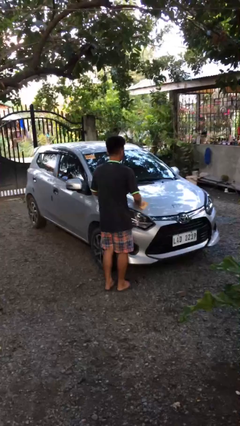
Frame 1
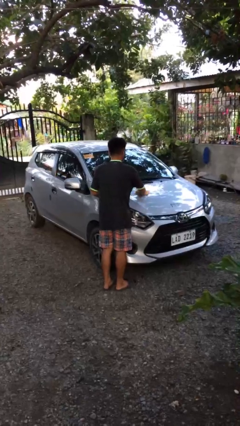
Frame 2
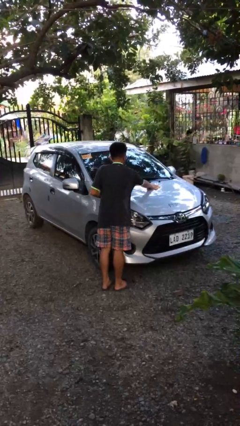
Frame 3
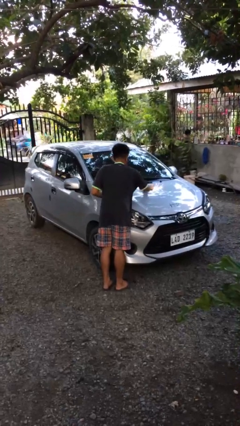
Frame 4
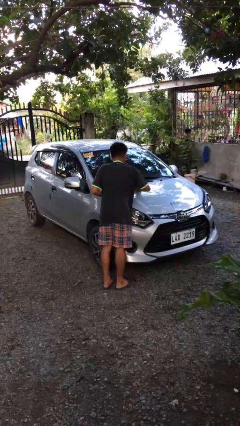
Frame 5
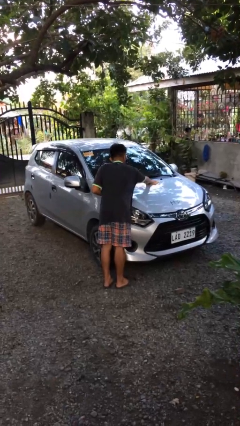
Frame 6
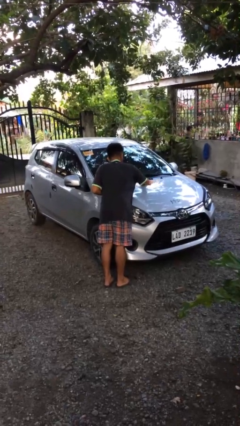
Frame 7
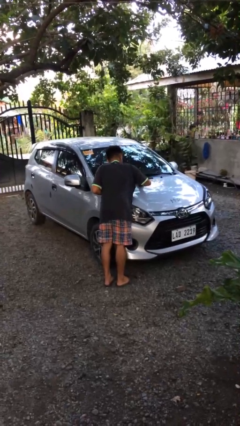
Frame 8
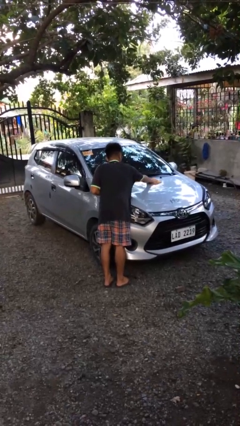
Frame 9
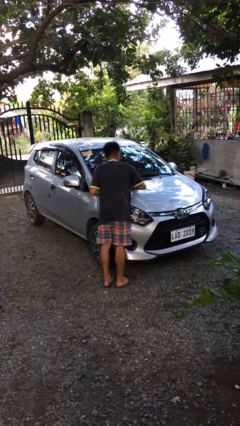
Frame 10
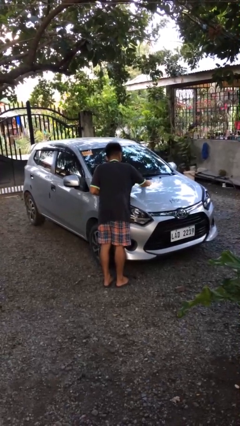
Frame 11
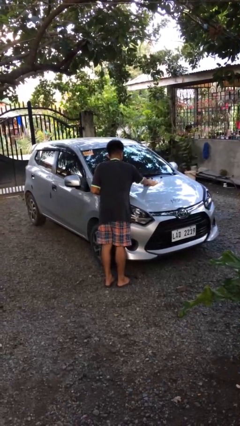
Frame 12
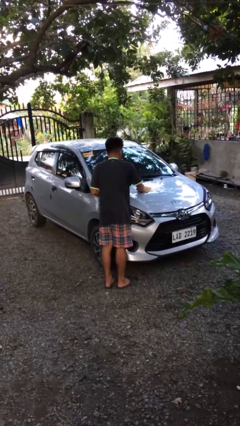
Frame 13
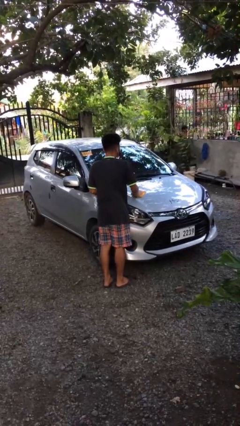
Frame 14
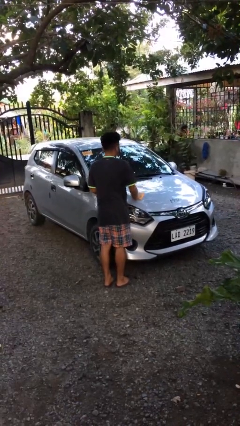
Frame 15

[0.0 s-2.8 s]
person polishes car with rag

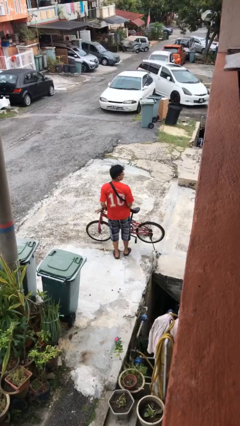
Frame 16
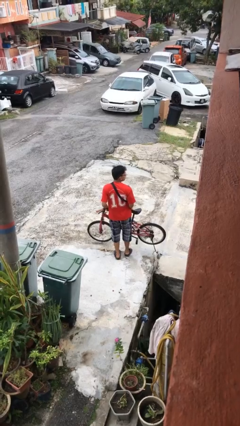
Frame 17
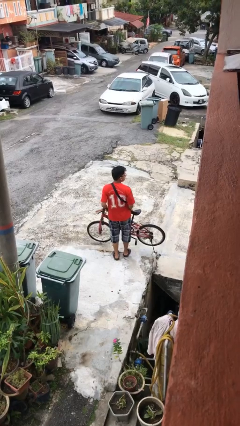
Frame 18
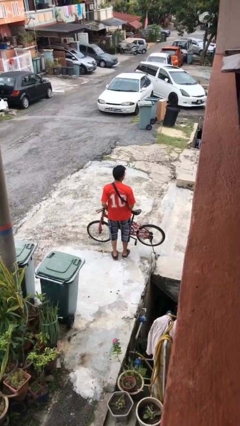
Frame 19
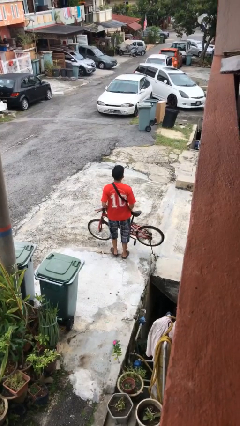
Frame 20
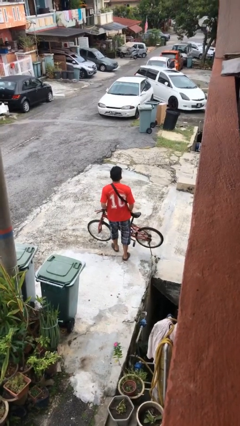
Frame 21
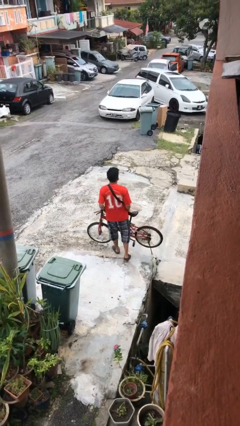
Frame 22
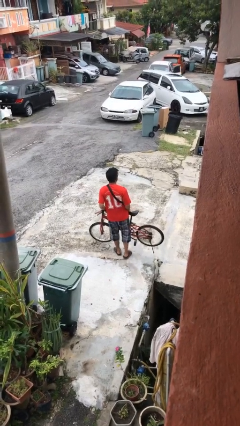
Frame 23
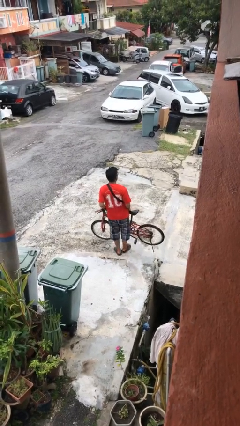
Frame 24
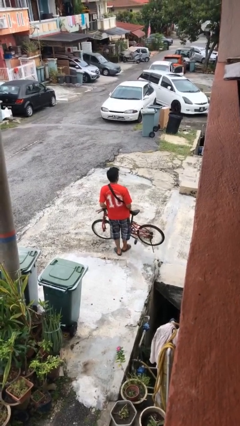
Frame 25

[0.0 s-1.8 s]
person carries bicycle

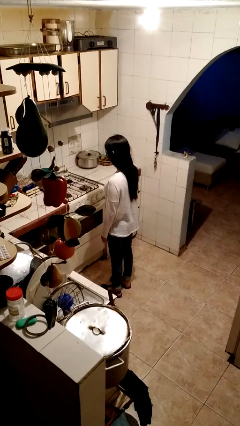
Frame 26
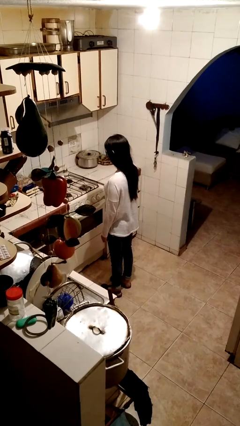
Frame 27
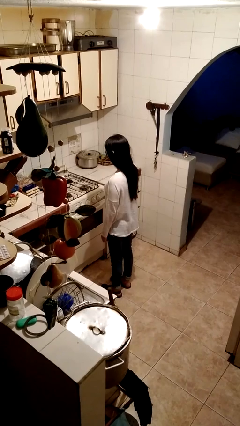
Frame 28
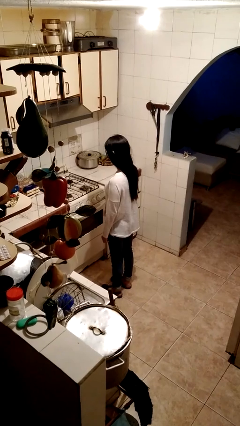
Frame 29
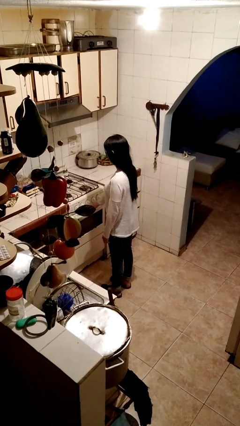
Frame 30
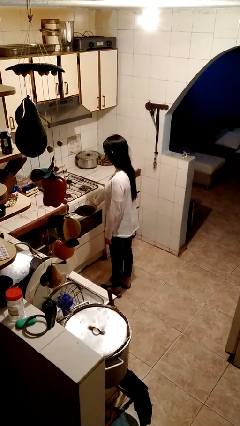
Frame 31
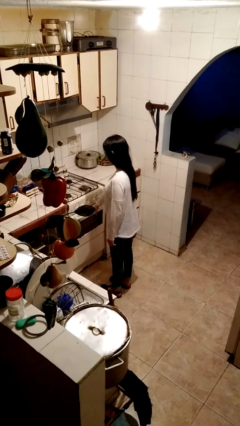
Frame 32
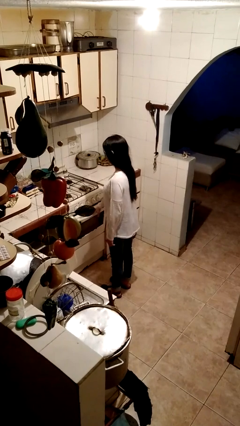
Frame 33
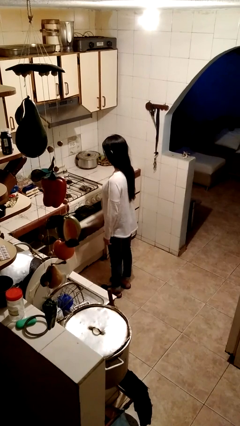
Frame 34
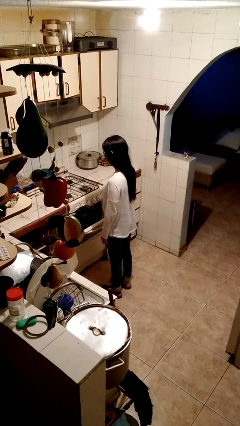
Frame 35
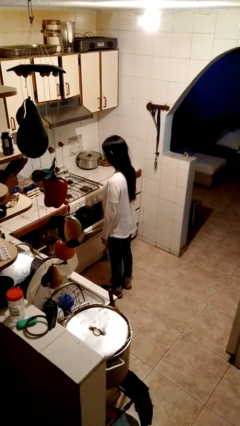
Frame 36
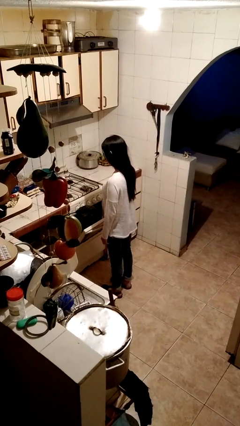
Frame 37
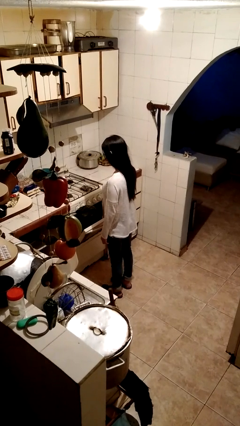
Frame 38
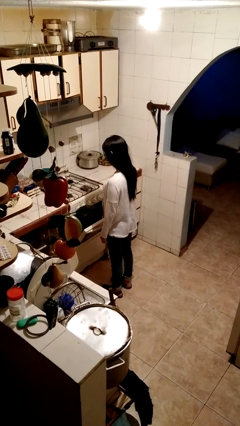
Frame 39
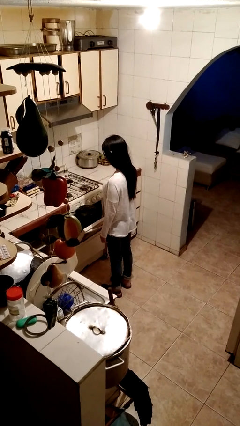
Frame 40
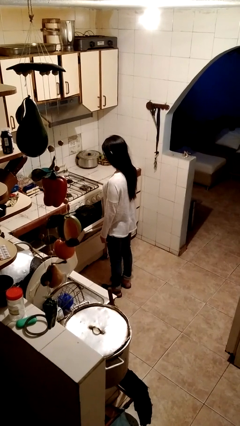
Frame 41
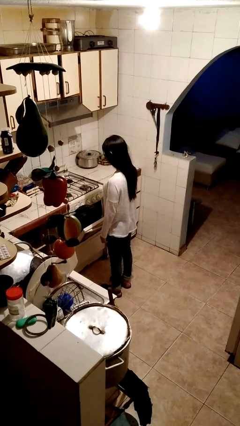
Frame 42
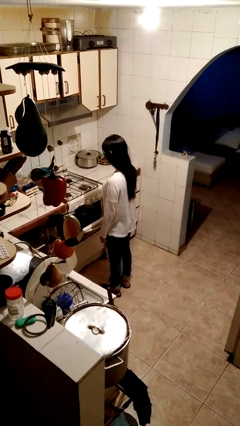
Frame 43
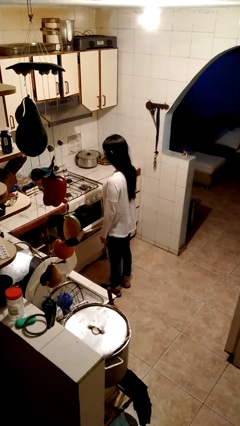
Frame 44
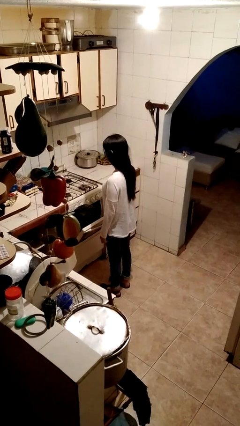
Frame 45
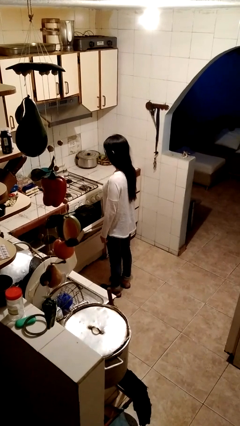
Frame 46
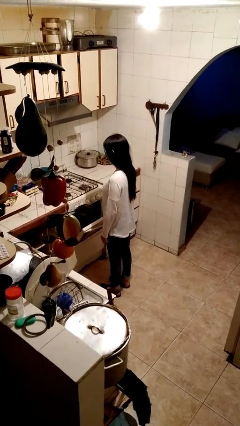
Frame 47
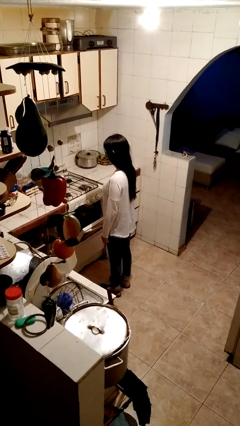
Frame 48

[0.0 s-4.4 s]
person opens oven door

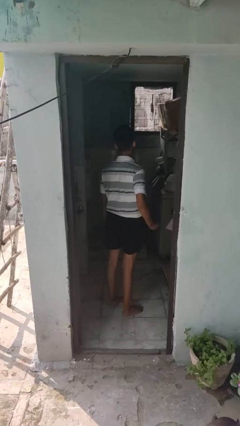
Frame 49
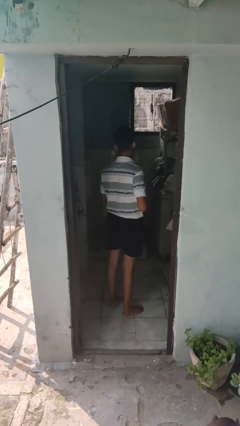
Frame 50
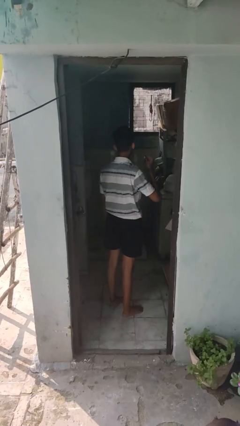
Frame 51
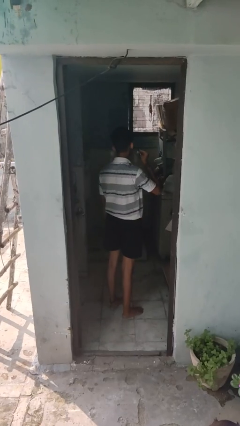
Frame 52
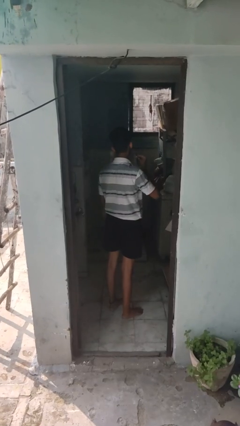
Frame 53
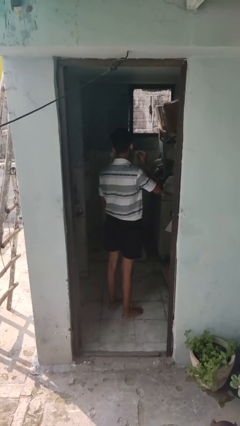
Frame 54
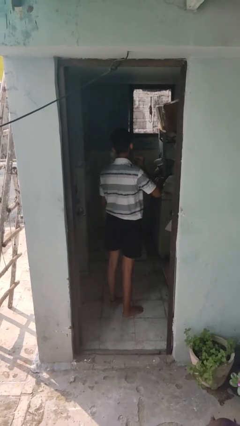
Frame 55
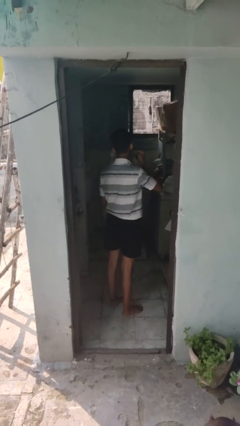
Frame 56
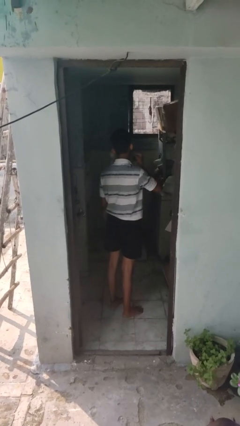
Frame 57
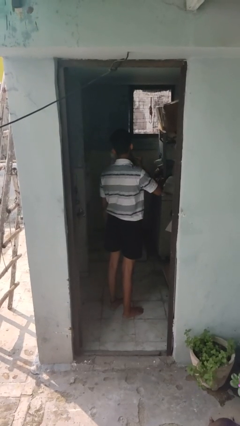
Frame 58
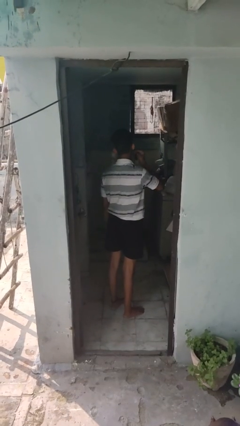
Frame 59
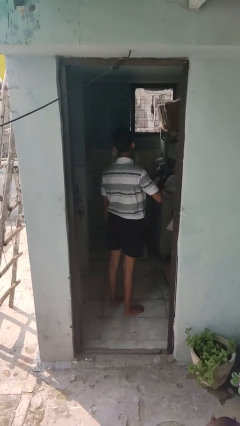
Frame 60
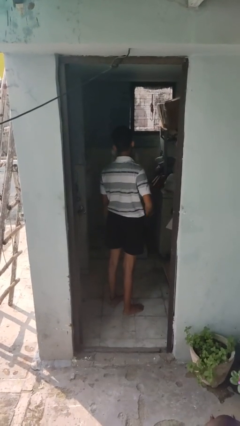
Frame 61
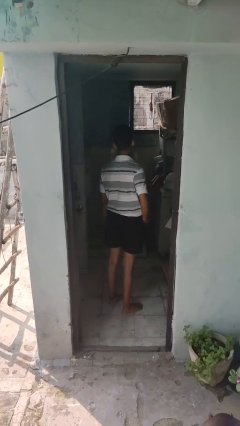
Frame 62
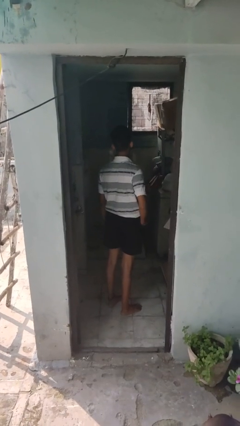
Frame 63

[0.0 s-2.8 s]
person shaves face

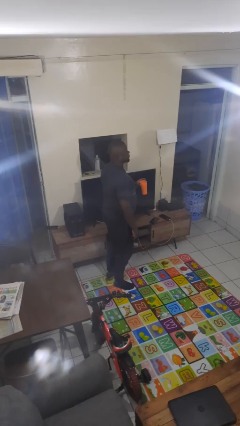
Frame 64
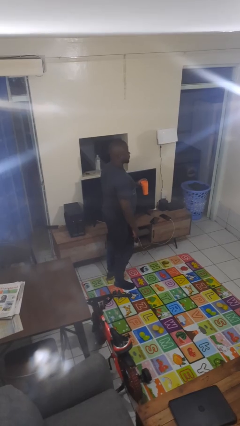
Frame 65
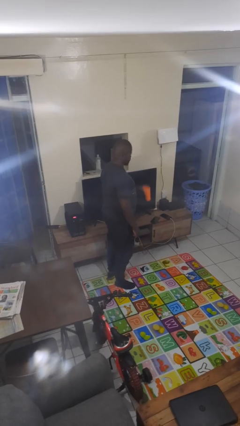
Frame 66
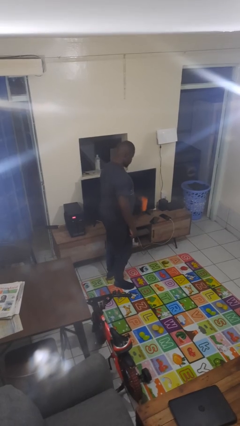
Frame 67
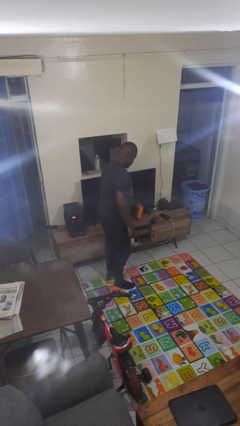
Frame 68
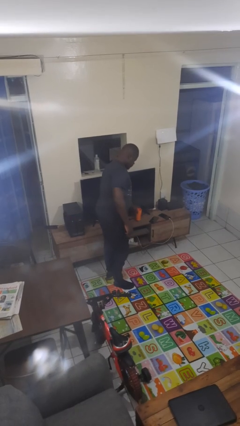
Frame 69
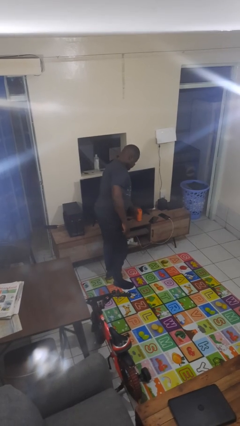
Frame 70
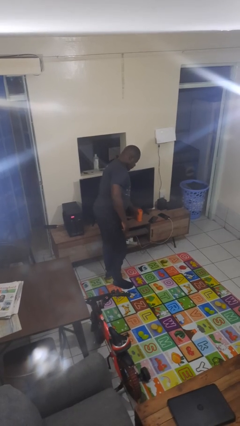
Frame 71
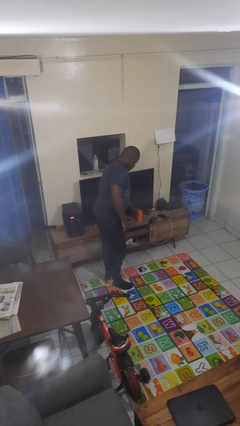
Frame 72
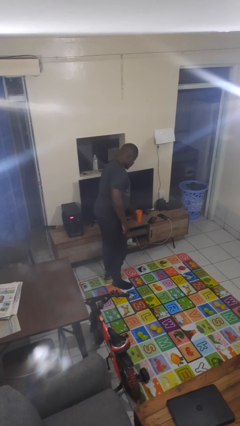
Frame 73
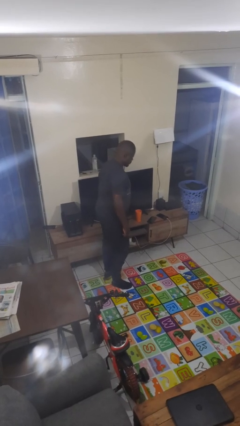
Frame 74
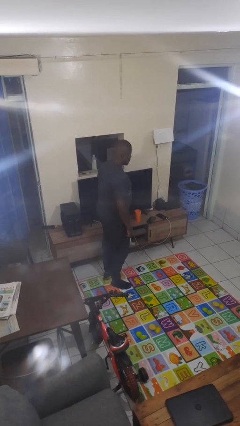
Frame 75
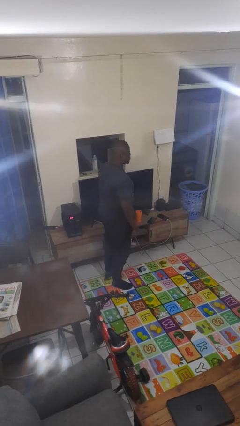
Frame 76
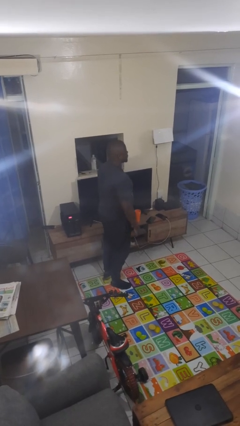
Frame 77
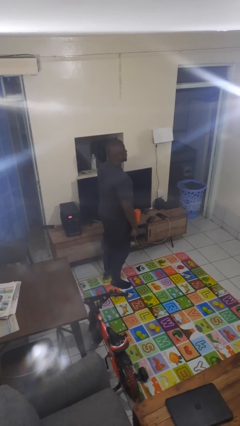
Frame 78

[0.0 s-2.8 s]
person puts down object on countertop

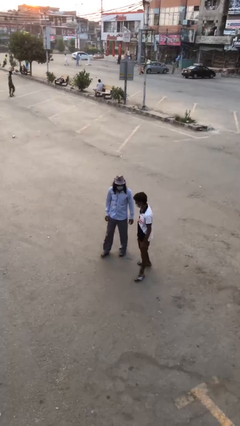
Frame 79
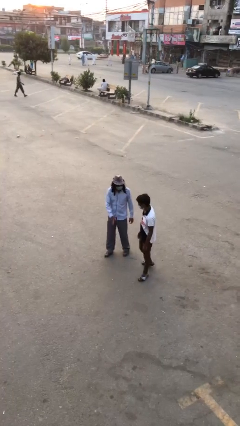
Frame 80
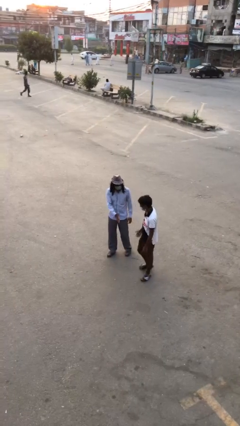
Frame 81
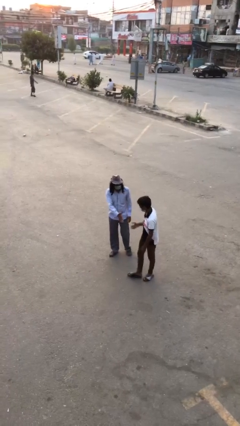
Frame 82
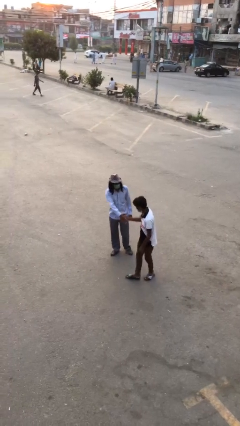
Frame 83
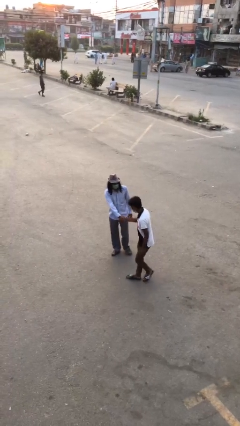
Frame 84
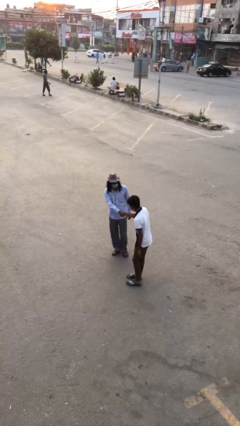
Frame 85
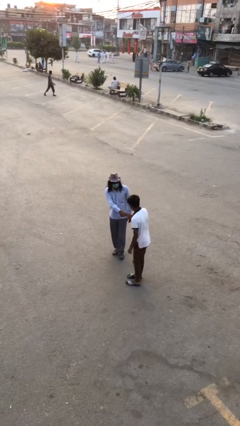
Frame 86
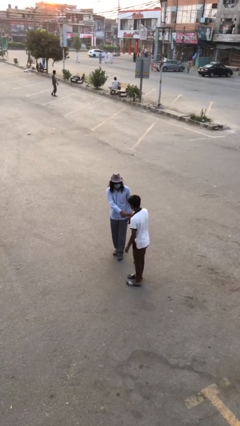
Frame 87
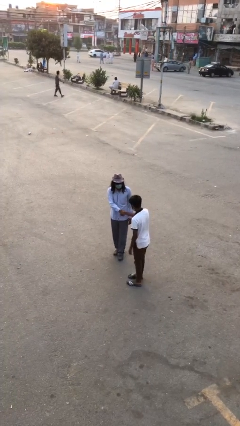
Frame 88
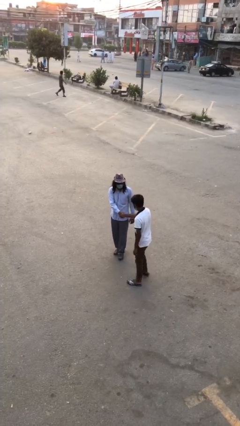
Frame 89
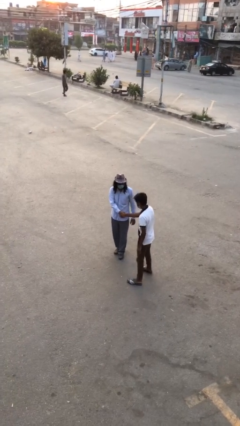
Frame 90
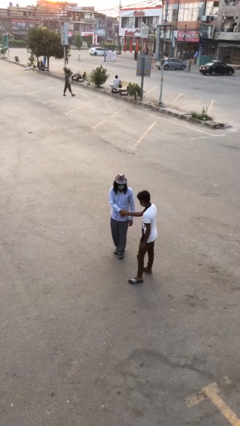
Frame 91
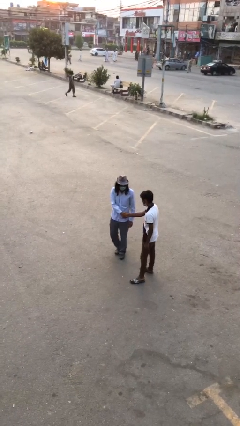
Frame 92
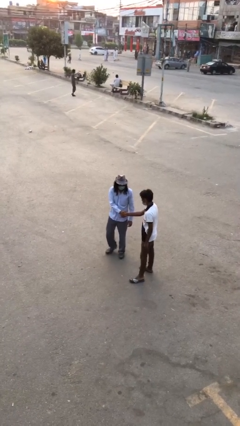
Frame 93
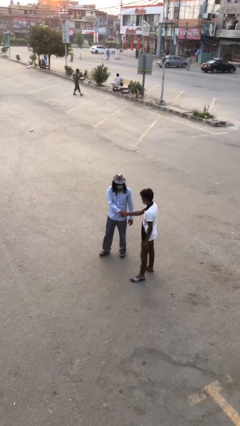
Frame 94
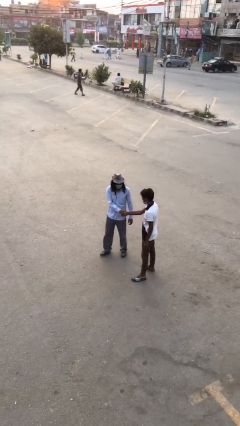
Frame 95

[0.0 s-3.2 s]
person shakes hand
